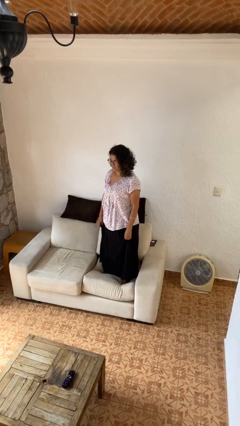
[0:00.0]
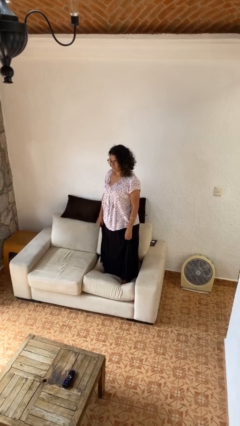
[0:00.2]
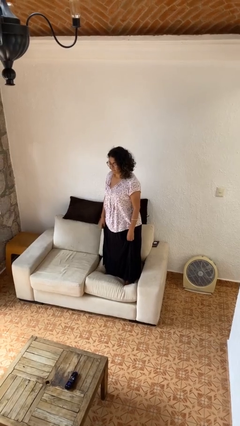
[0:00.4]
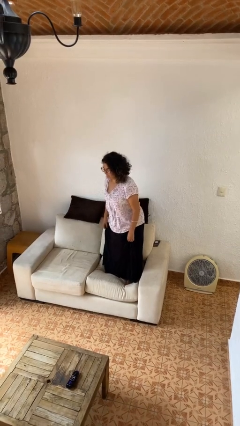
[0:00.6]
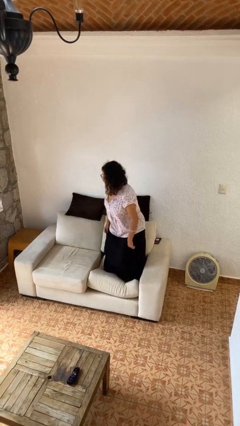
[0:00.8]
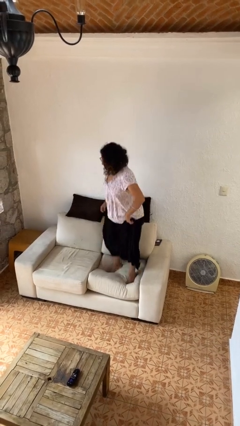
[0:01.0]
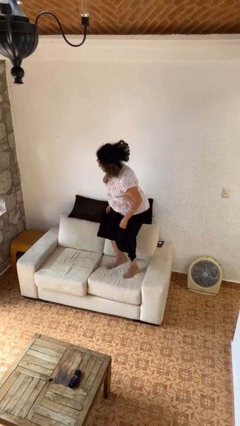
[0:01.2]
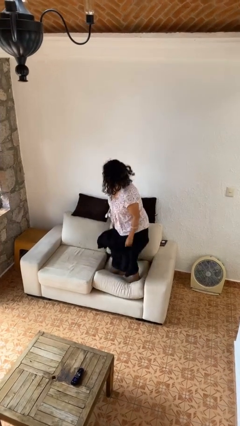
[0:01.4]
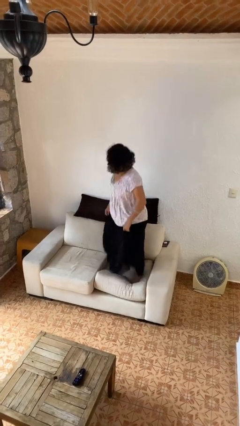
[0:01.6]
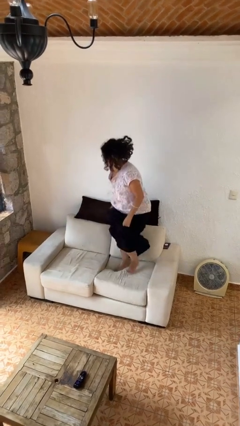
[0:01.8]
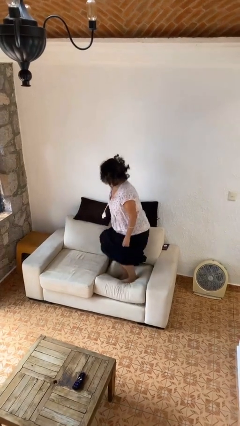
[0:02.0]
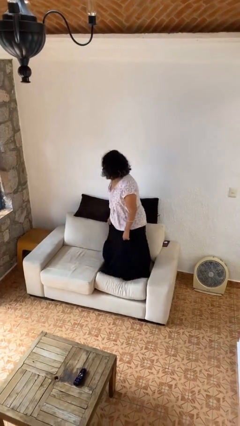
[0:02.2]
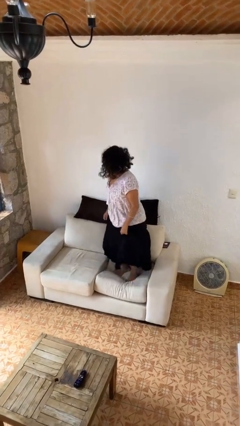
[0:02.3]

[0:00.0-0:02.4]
person jumps on couch

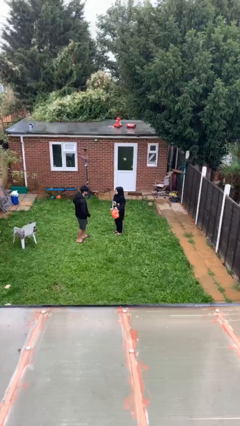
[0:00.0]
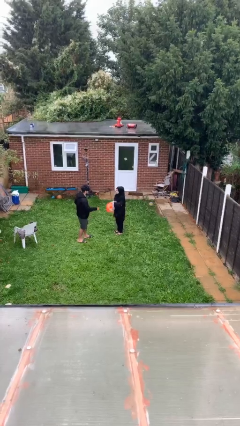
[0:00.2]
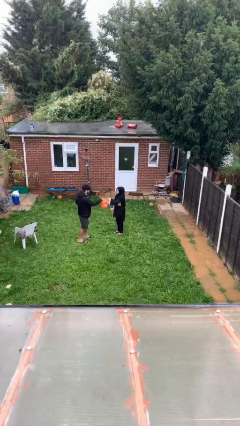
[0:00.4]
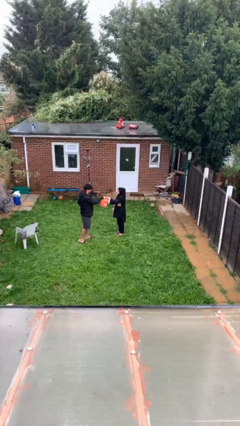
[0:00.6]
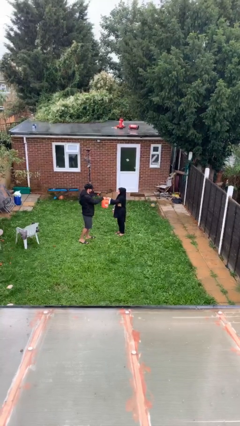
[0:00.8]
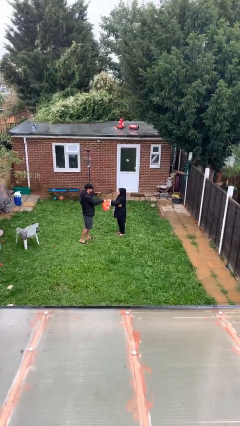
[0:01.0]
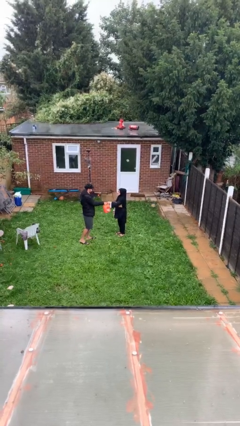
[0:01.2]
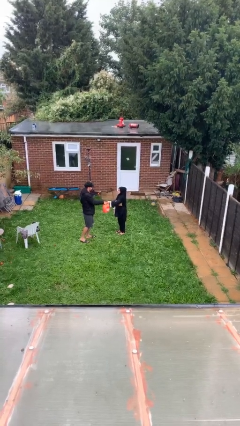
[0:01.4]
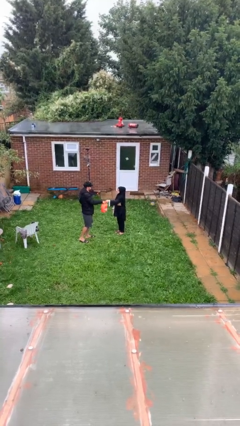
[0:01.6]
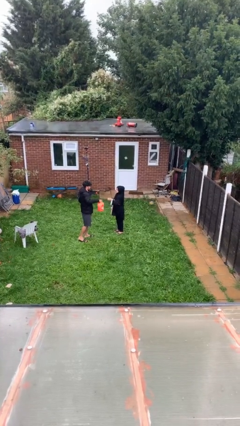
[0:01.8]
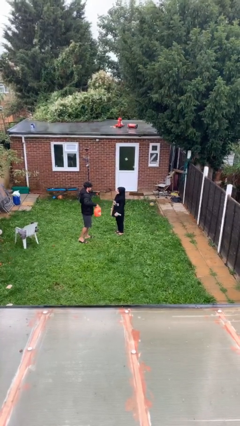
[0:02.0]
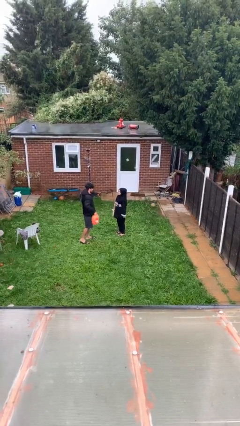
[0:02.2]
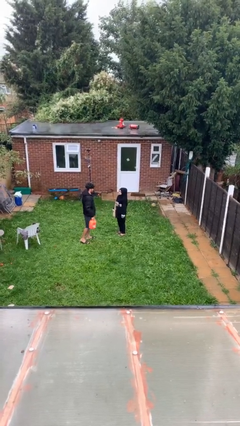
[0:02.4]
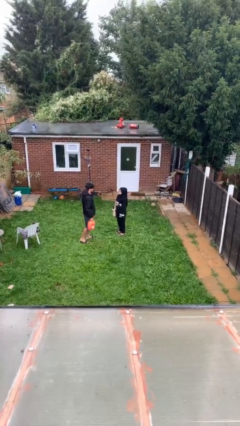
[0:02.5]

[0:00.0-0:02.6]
person transfers object to person

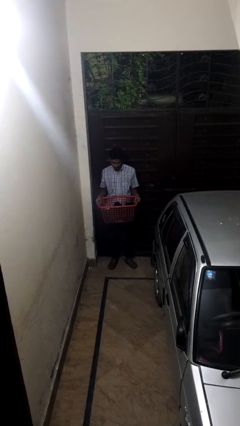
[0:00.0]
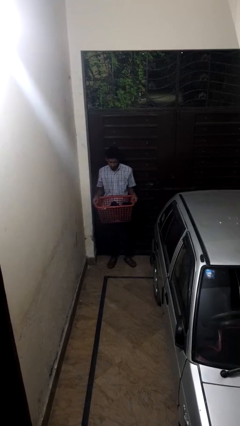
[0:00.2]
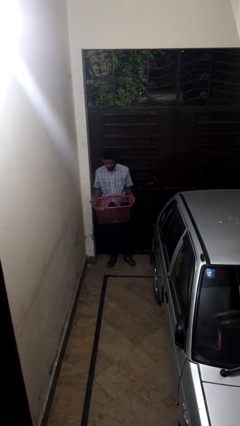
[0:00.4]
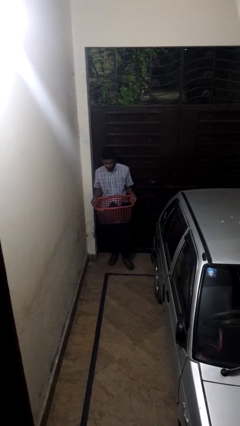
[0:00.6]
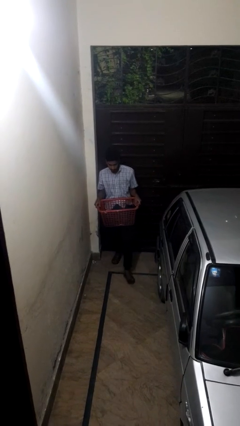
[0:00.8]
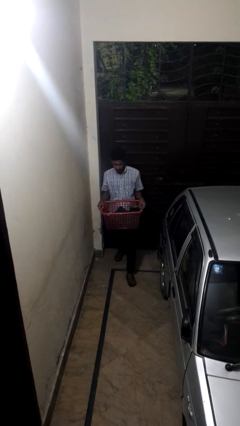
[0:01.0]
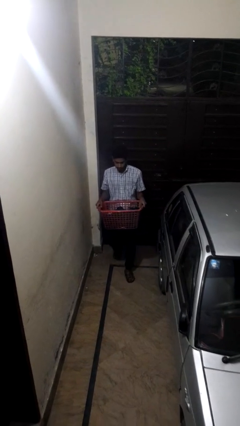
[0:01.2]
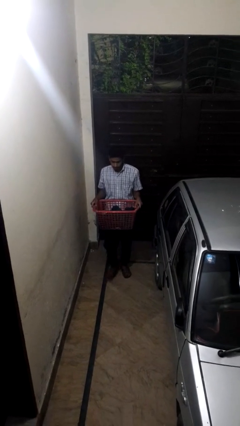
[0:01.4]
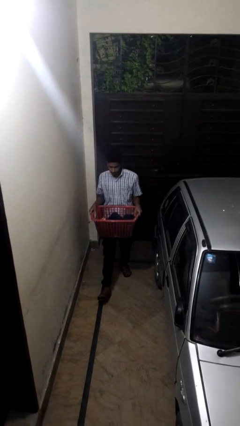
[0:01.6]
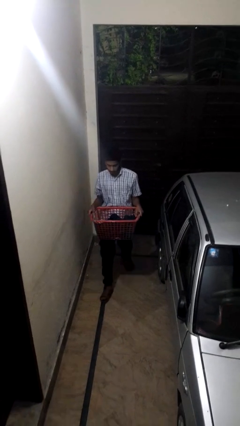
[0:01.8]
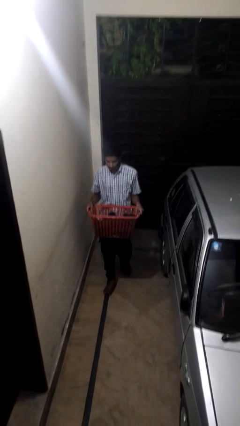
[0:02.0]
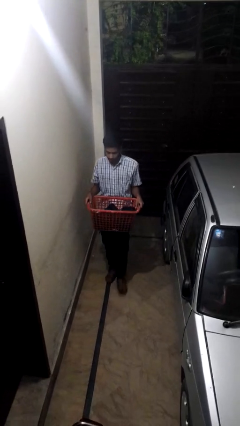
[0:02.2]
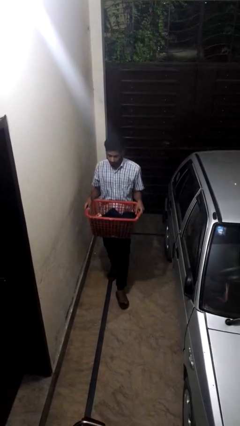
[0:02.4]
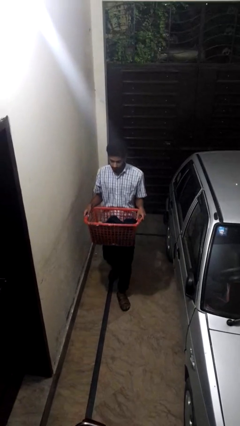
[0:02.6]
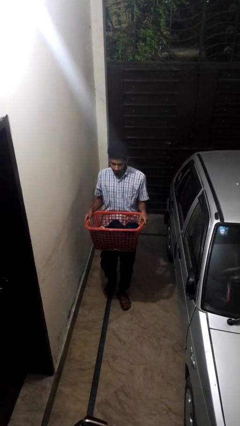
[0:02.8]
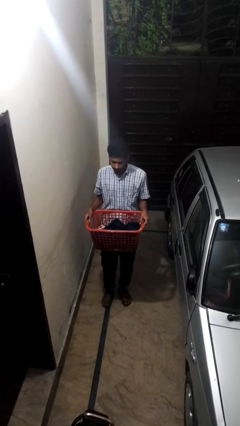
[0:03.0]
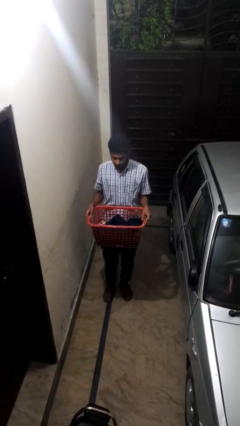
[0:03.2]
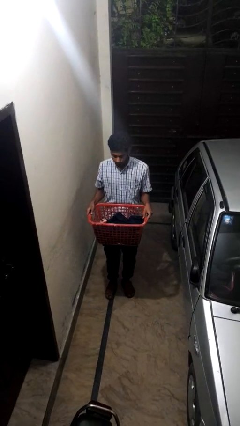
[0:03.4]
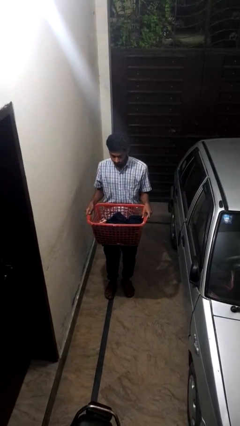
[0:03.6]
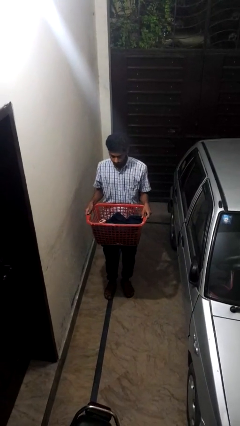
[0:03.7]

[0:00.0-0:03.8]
person carries laundry basket

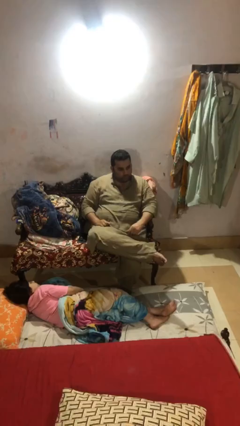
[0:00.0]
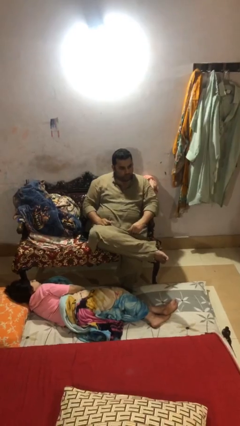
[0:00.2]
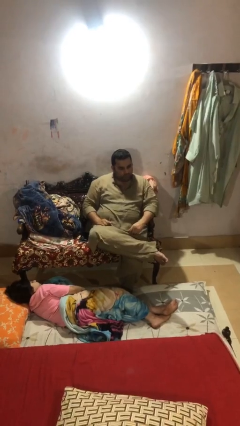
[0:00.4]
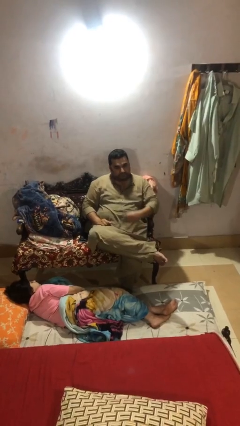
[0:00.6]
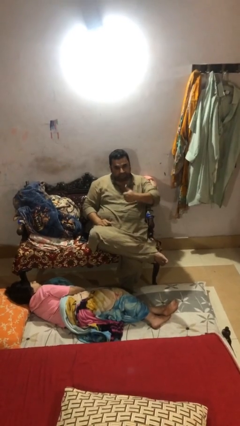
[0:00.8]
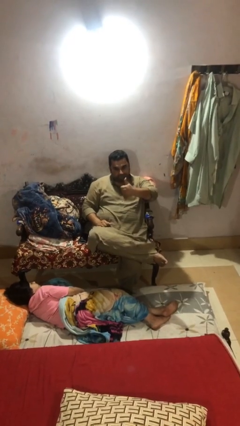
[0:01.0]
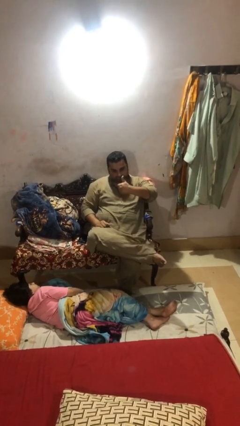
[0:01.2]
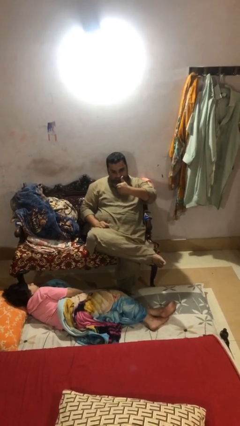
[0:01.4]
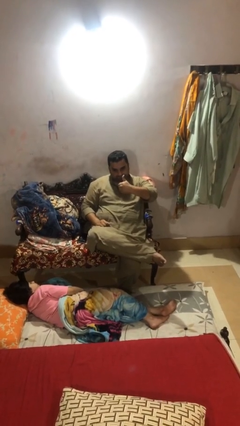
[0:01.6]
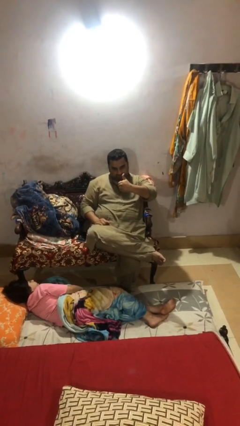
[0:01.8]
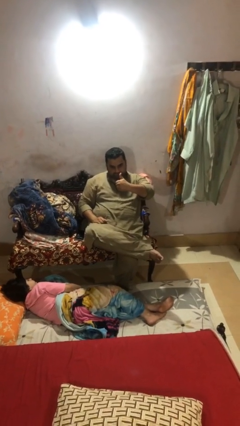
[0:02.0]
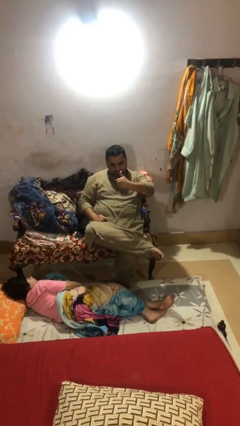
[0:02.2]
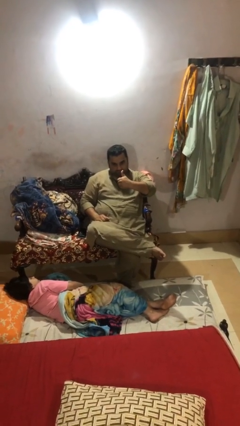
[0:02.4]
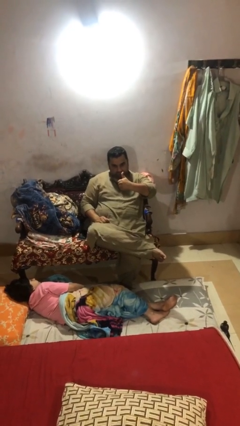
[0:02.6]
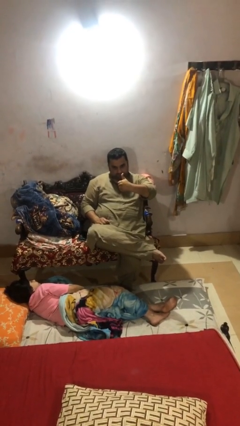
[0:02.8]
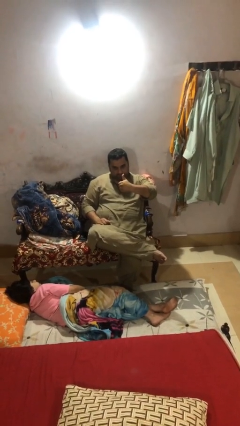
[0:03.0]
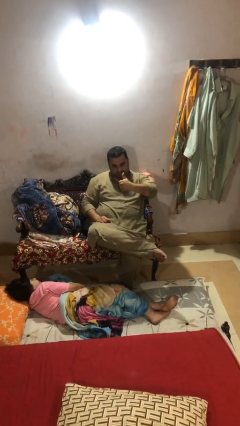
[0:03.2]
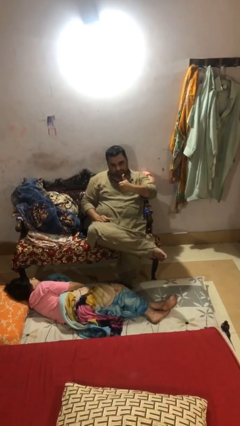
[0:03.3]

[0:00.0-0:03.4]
person gestures thumbs up

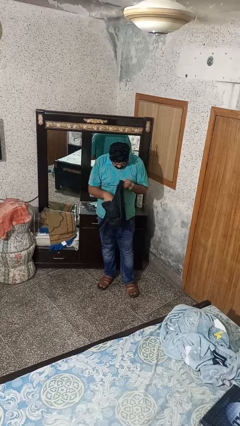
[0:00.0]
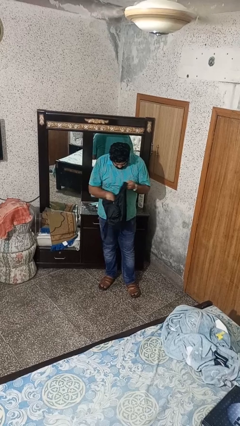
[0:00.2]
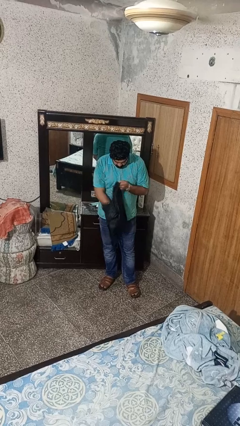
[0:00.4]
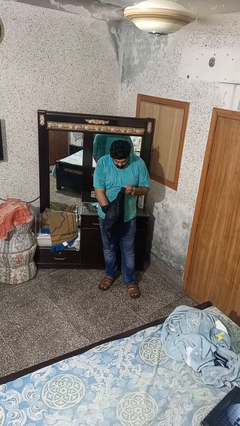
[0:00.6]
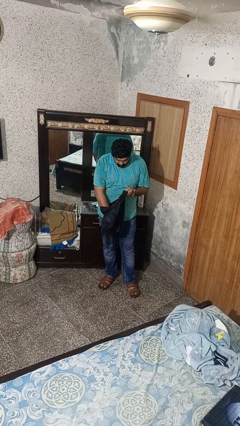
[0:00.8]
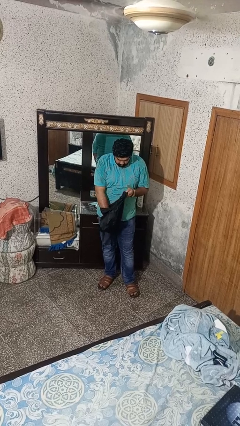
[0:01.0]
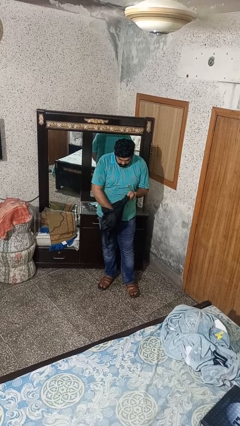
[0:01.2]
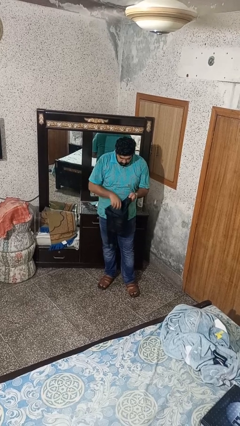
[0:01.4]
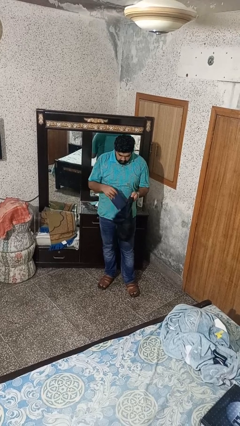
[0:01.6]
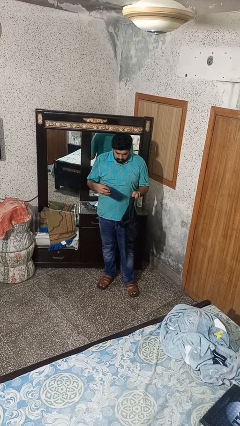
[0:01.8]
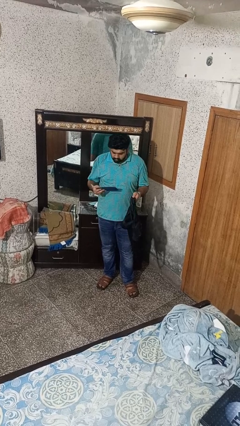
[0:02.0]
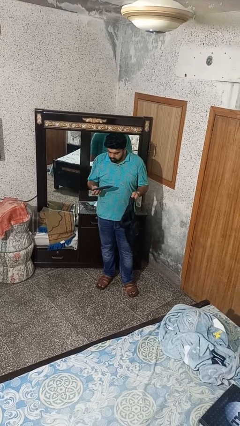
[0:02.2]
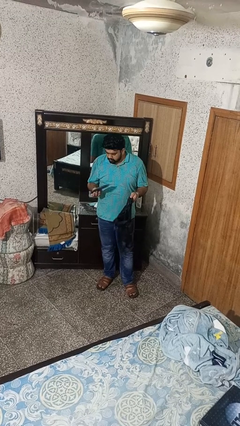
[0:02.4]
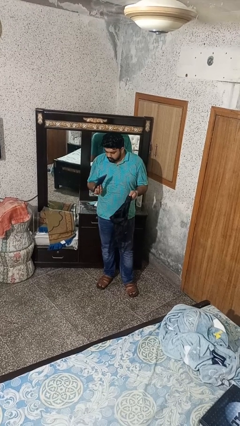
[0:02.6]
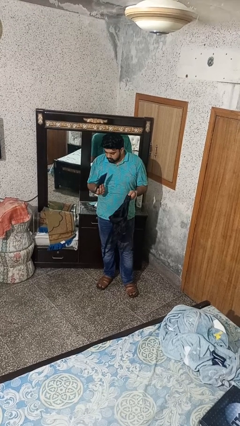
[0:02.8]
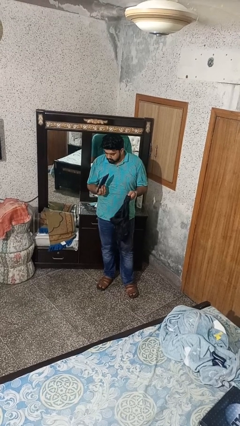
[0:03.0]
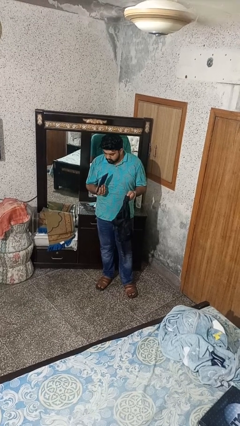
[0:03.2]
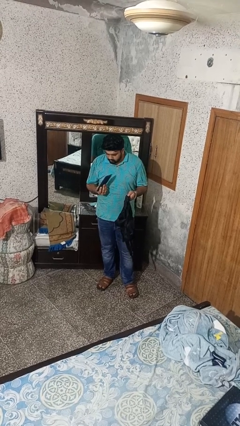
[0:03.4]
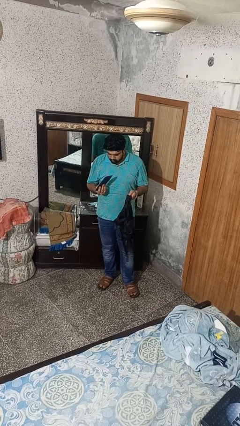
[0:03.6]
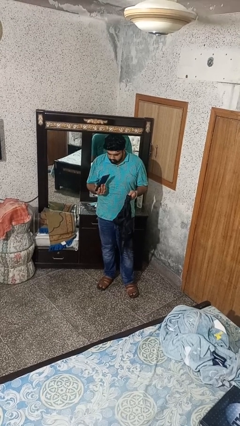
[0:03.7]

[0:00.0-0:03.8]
person takes object from backpack

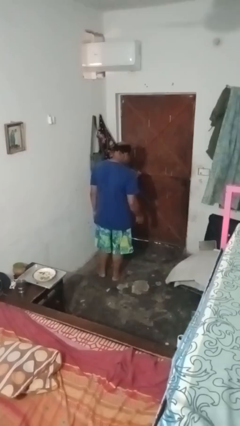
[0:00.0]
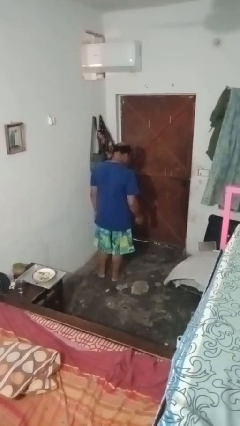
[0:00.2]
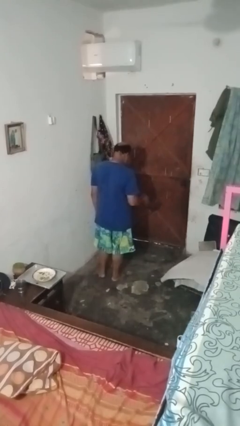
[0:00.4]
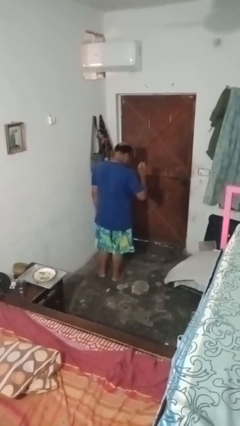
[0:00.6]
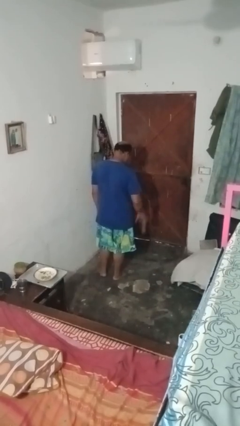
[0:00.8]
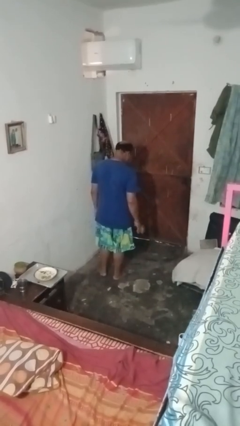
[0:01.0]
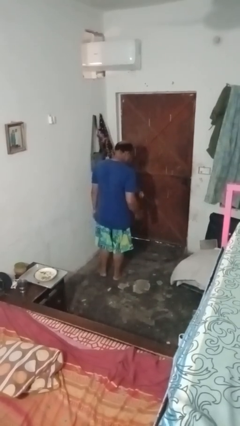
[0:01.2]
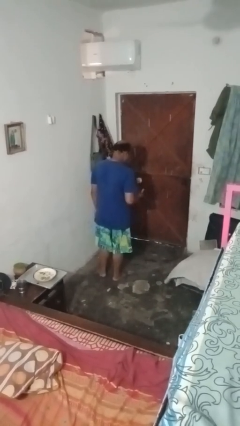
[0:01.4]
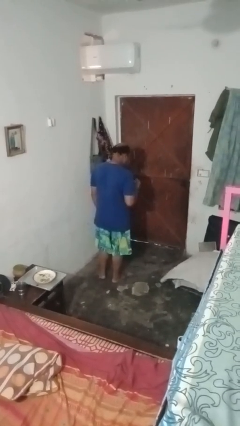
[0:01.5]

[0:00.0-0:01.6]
person bounces ball on floor
